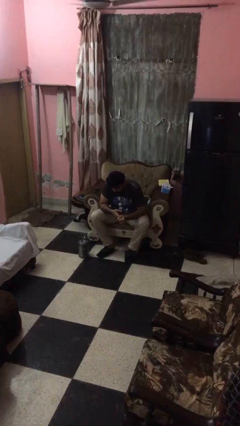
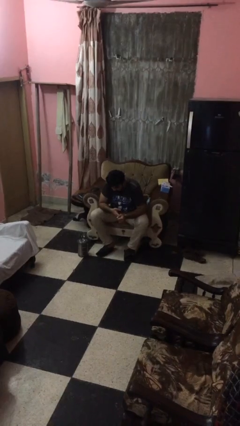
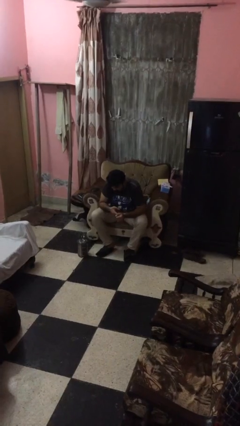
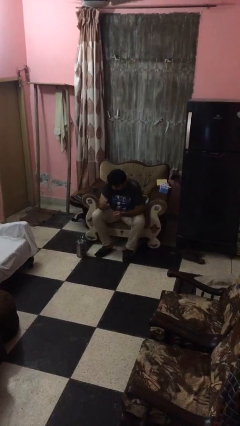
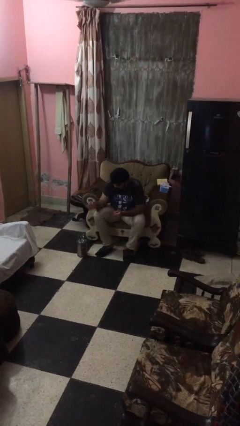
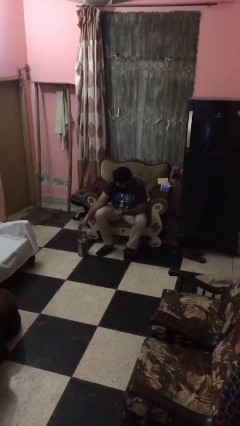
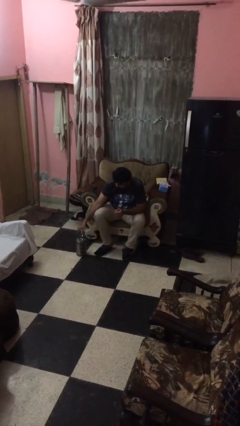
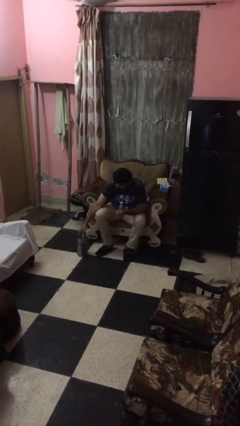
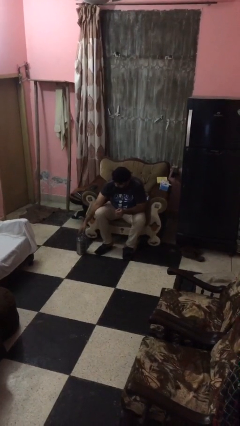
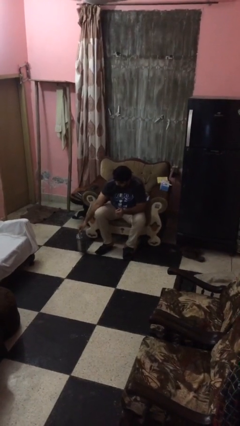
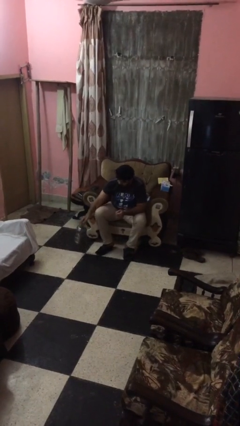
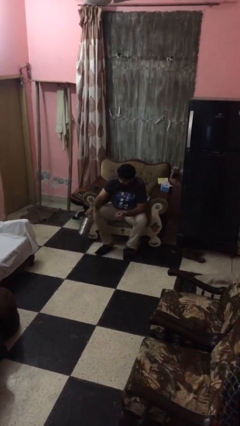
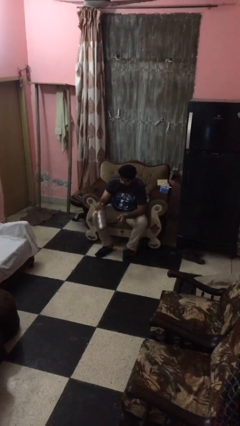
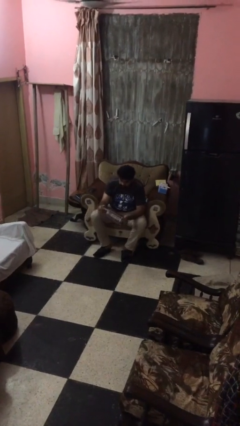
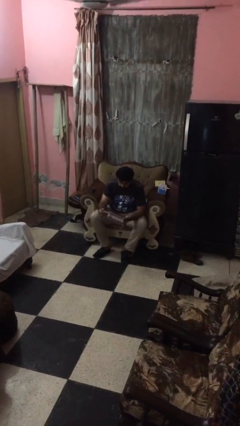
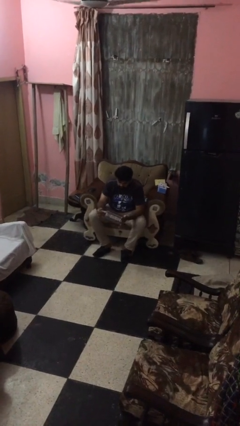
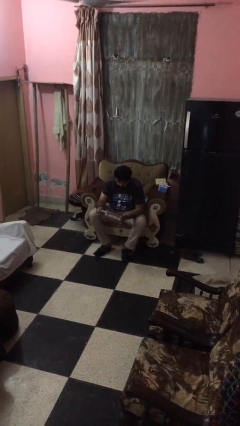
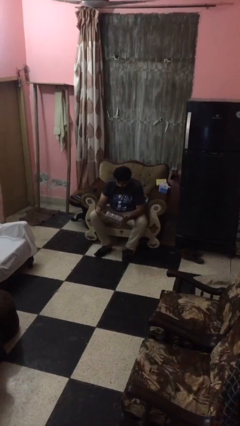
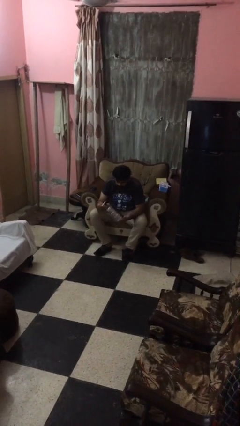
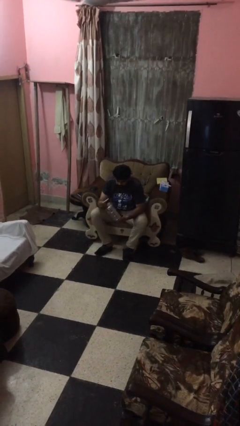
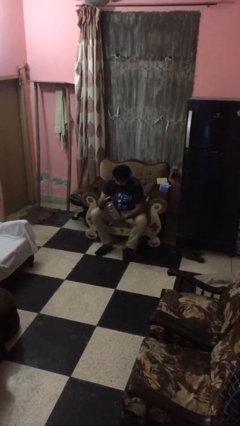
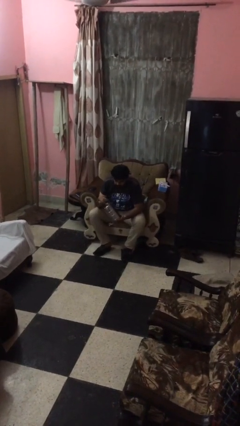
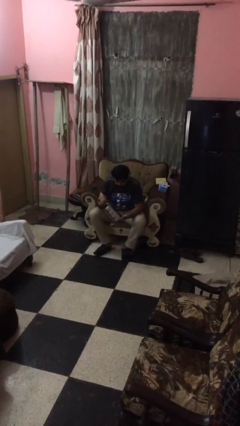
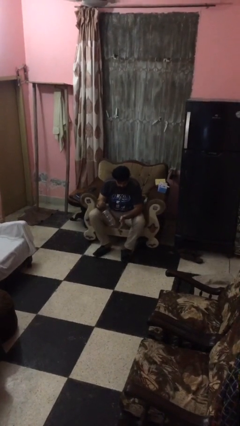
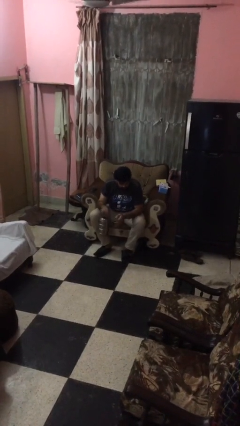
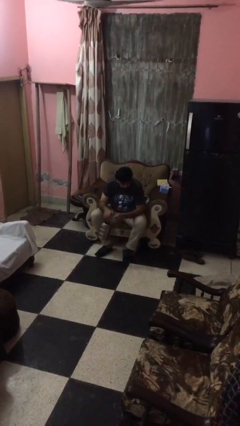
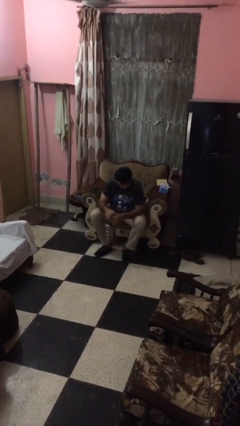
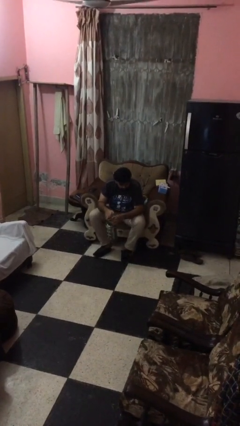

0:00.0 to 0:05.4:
person picks up object from floor

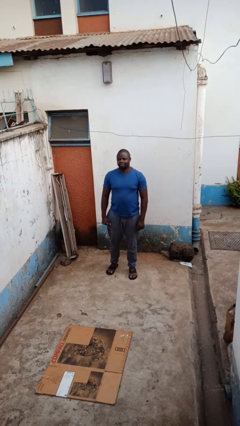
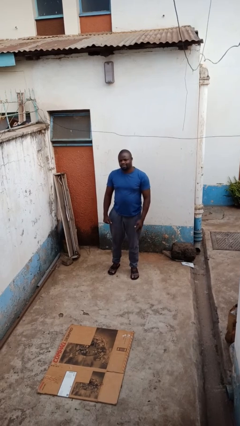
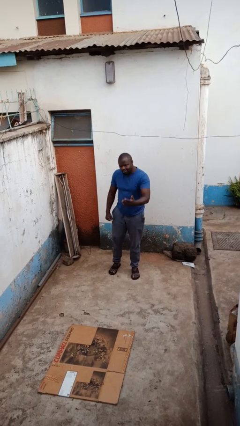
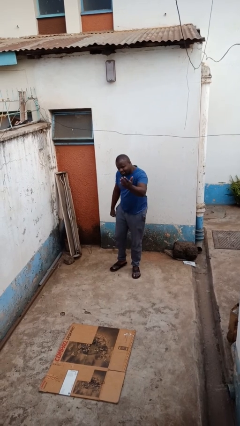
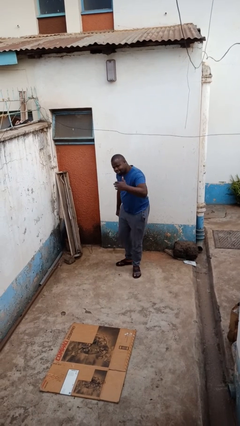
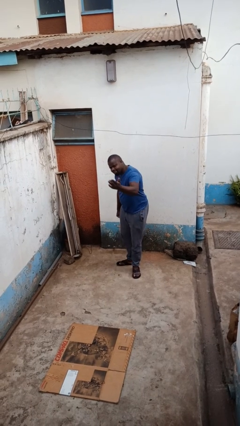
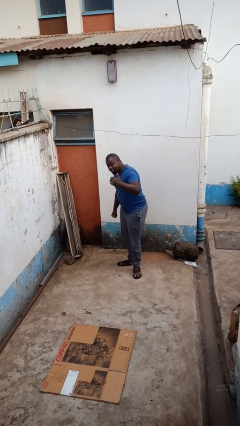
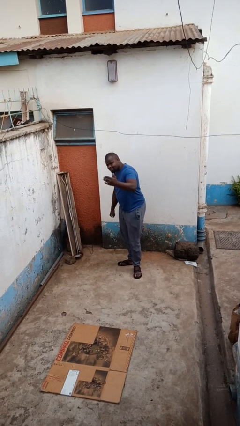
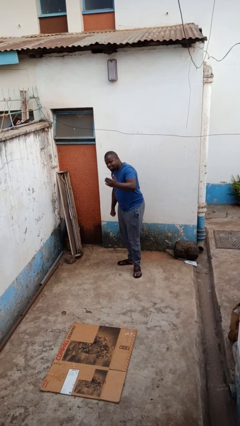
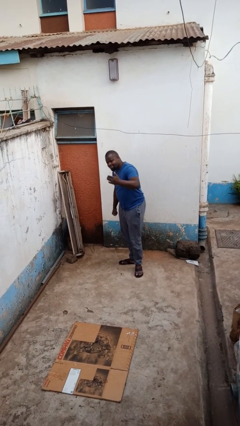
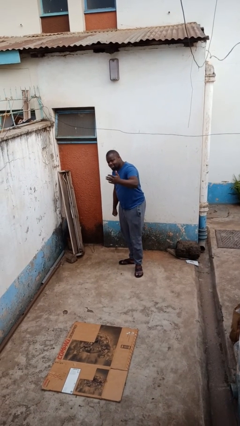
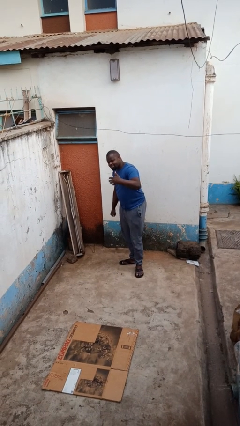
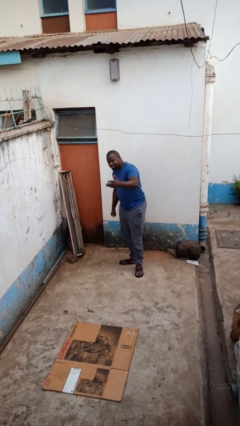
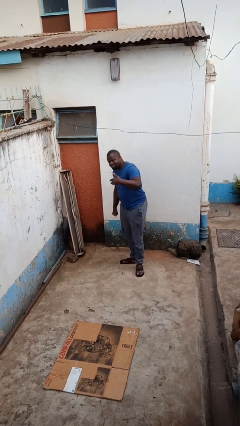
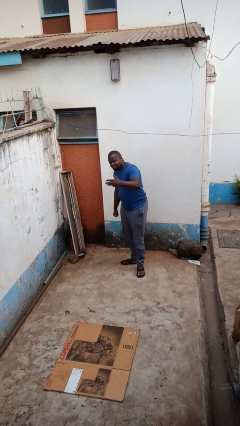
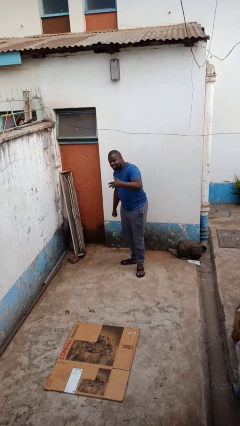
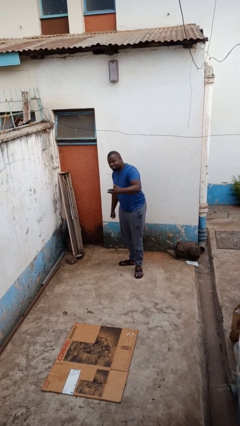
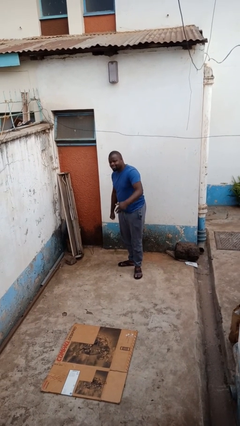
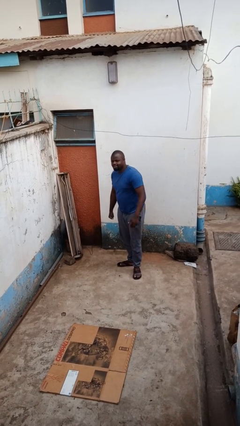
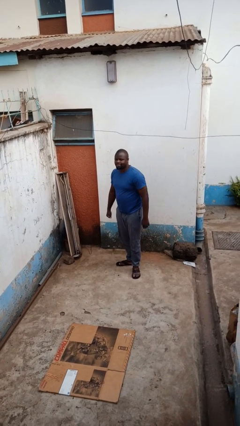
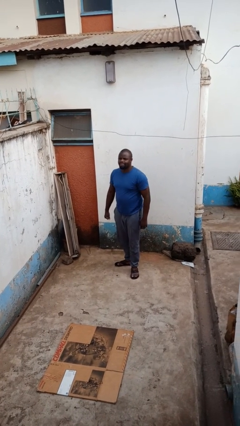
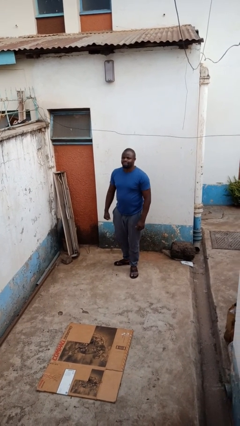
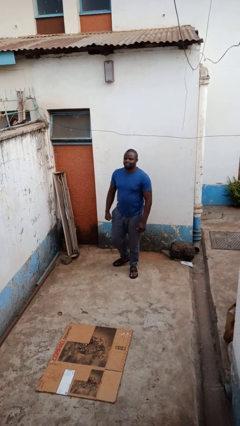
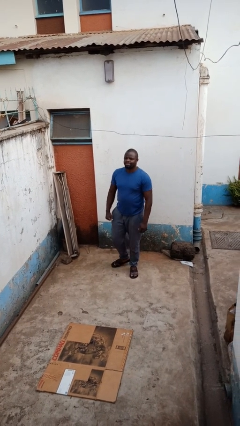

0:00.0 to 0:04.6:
person gestures come here

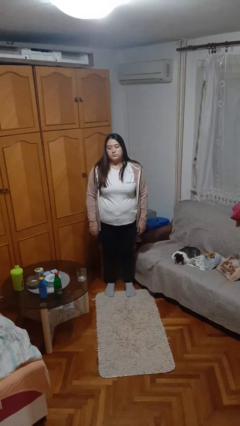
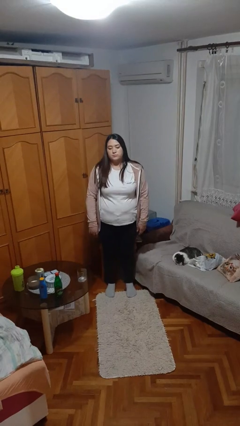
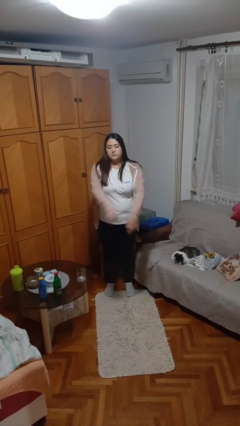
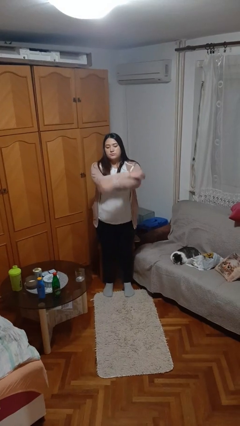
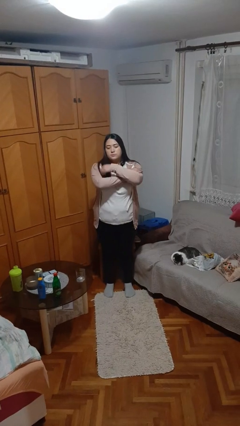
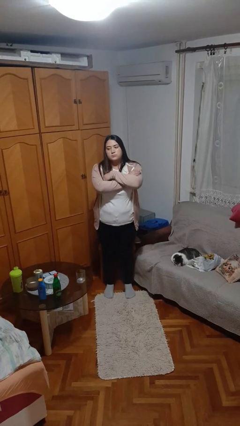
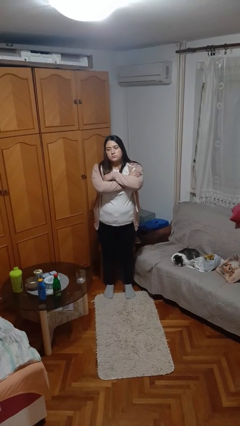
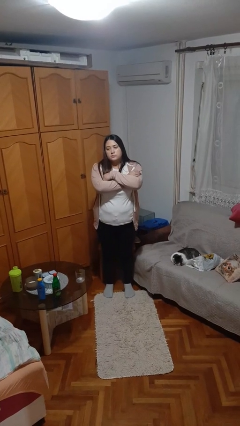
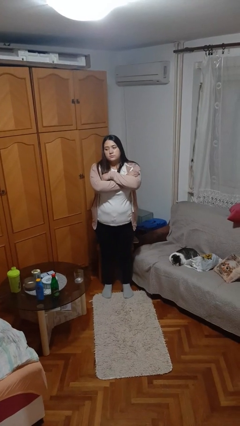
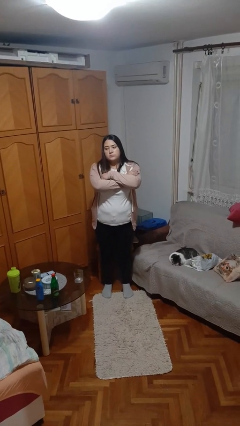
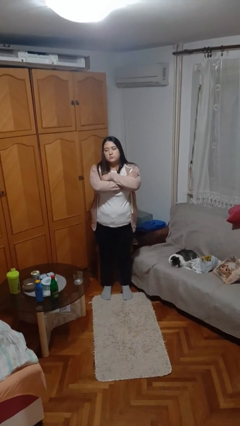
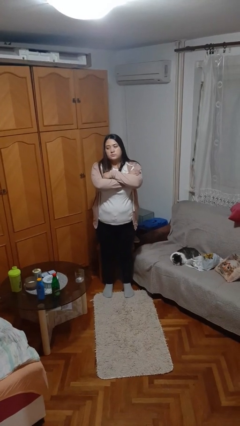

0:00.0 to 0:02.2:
person crosses arms

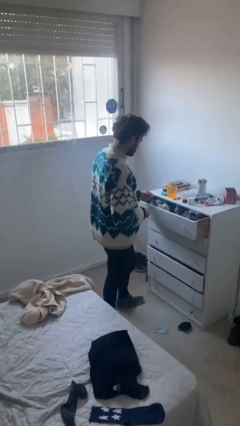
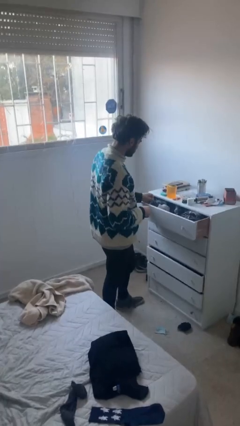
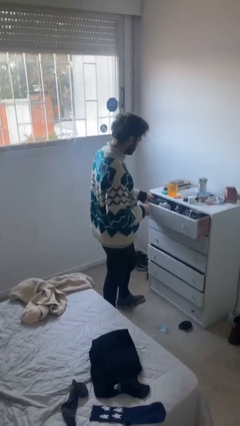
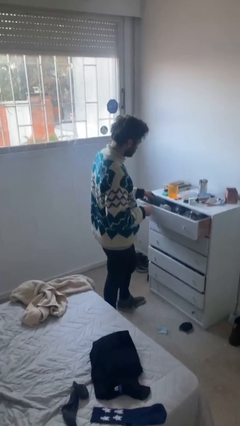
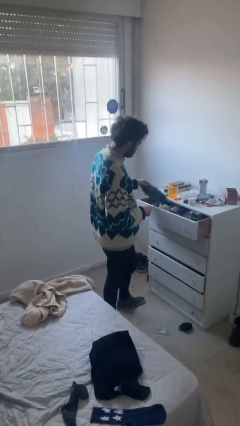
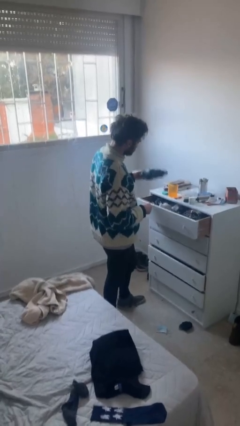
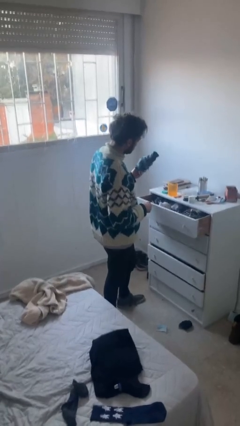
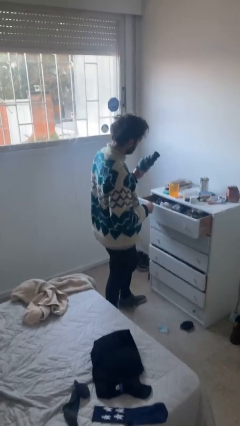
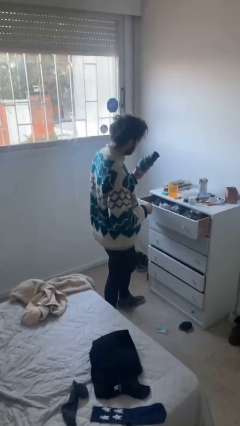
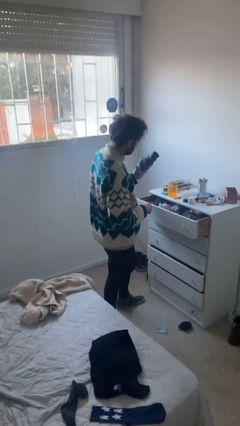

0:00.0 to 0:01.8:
person takes clothes from dresser

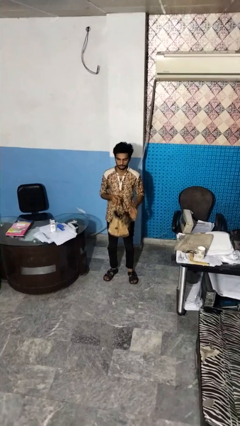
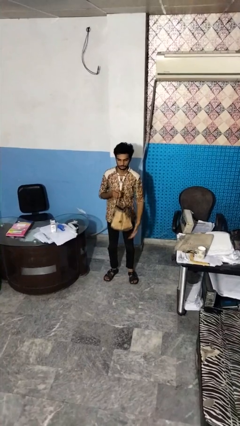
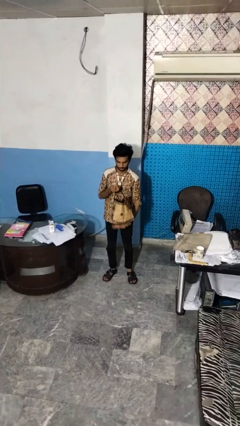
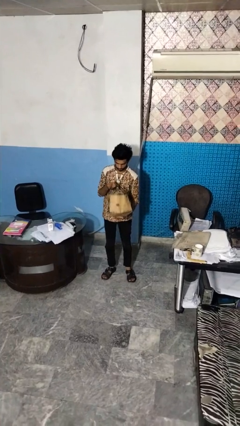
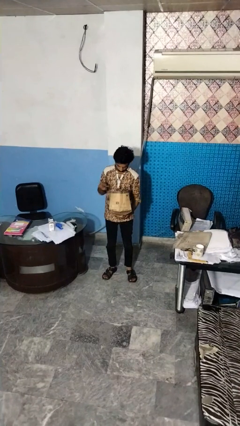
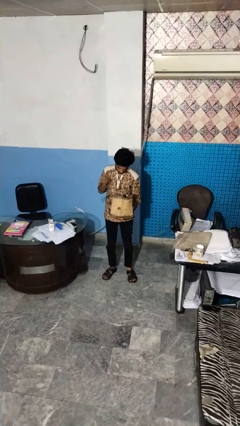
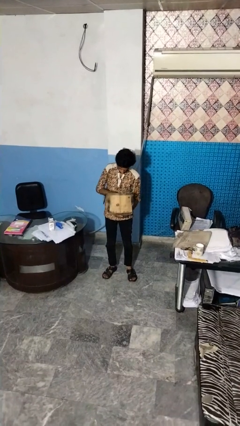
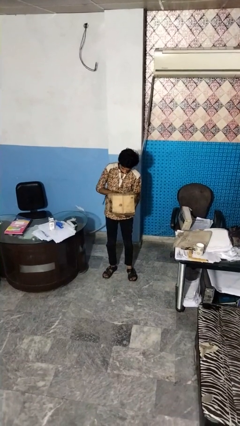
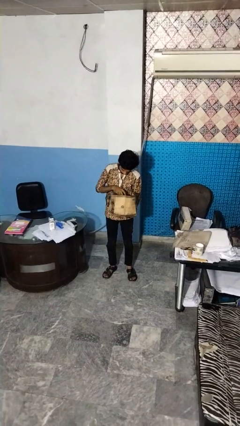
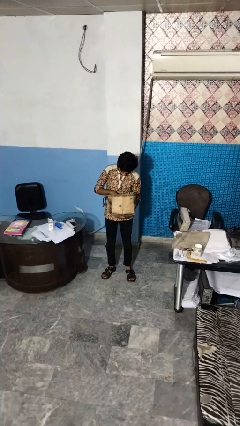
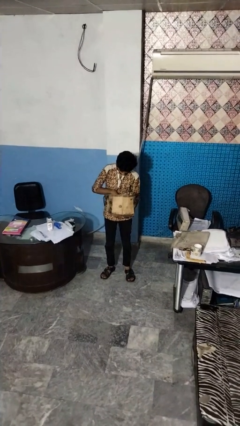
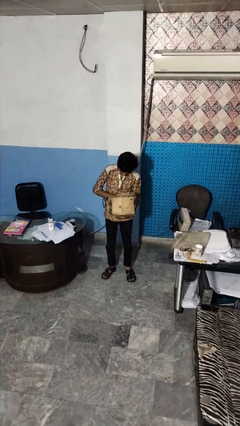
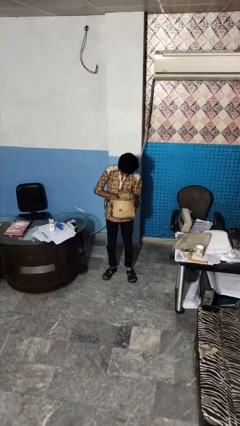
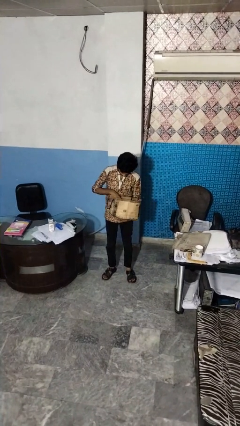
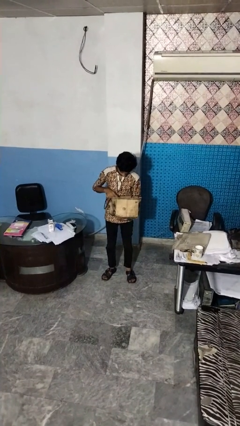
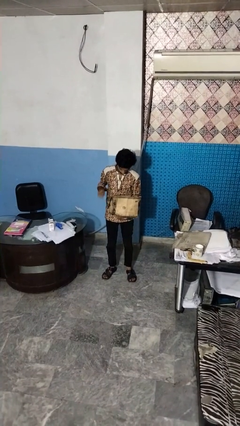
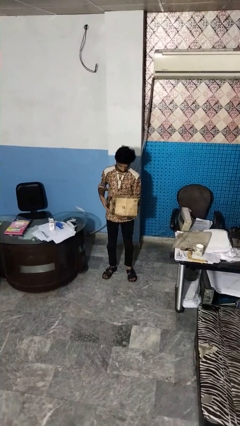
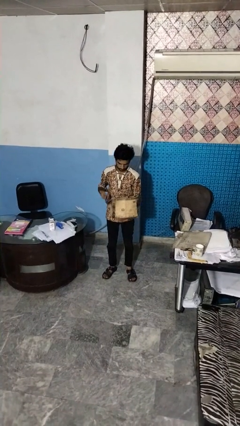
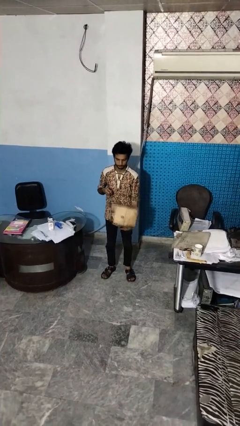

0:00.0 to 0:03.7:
person searches in bag

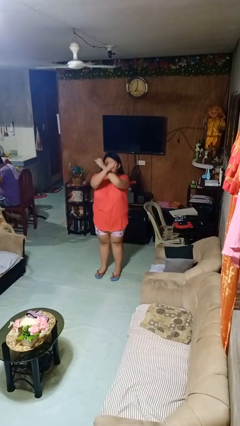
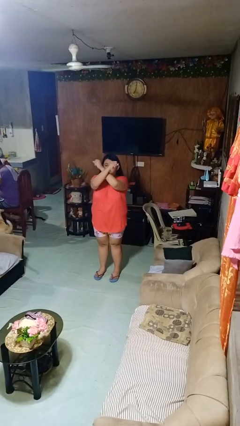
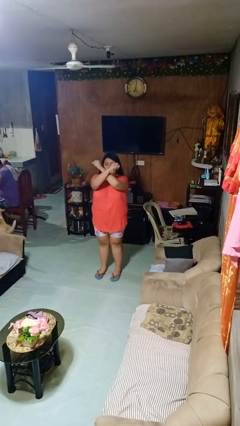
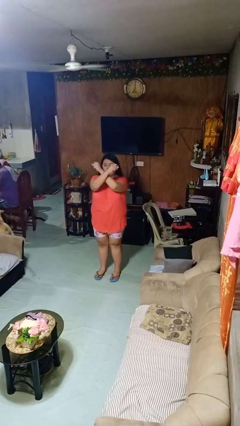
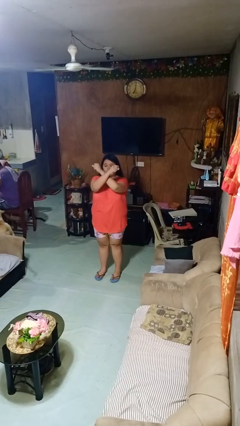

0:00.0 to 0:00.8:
person gestures arms x
